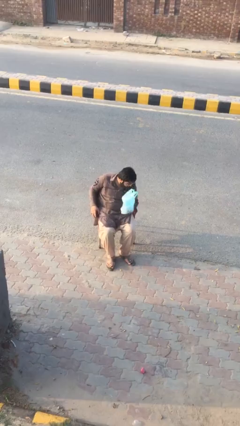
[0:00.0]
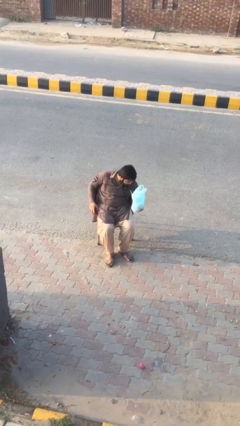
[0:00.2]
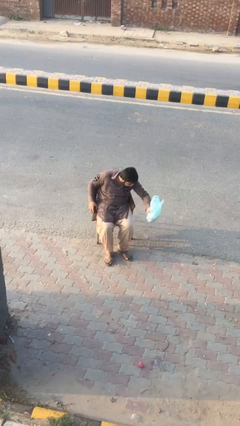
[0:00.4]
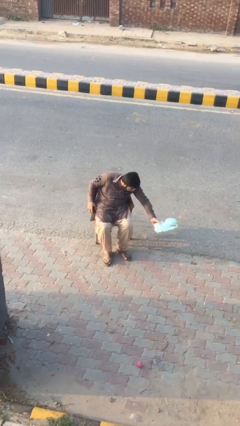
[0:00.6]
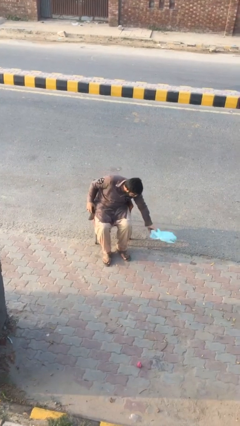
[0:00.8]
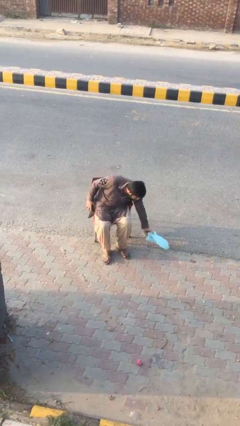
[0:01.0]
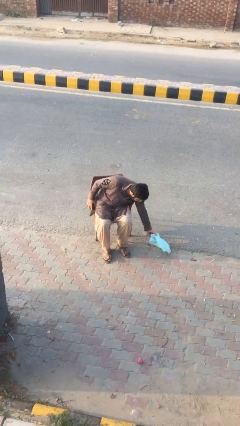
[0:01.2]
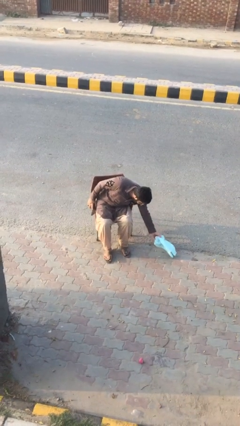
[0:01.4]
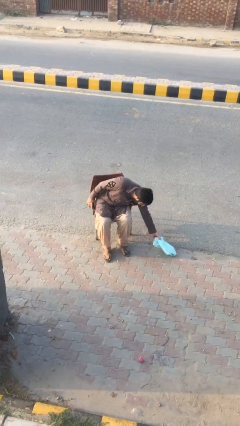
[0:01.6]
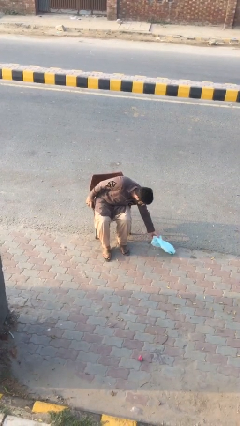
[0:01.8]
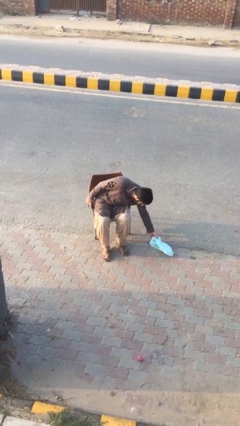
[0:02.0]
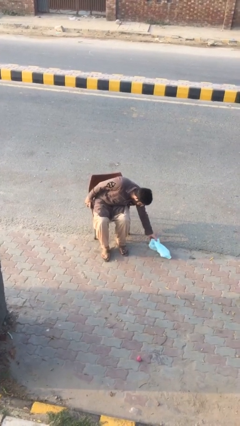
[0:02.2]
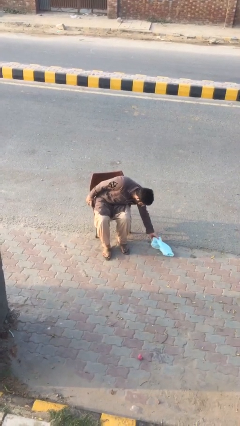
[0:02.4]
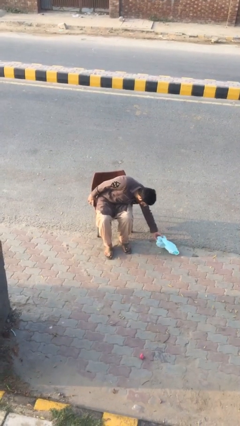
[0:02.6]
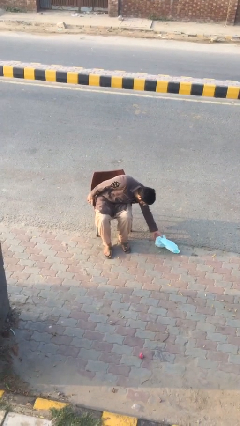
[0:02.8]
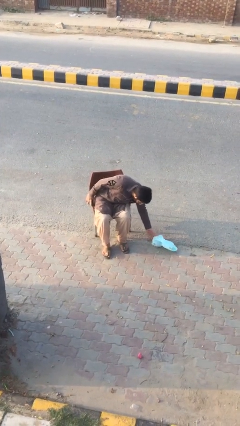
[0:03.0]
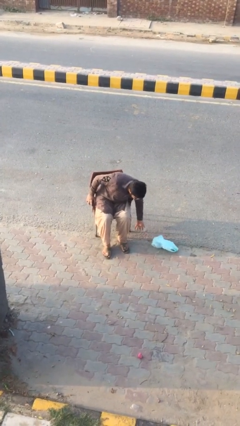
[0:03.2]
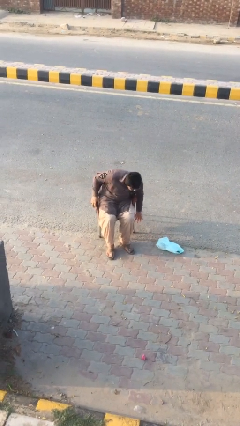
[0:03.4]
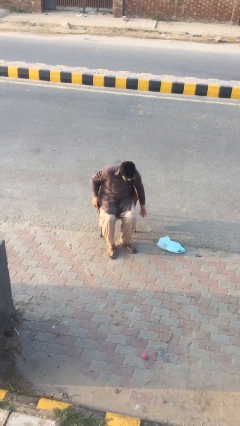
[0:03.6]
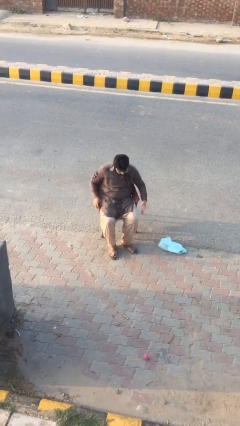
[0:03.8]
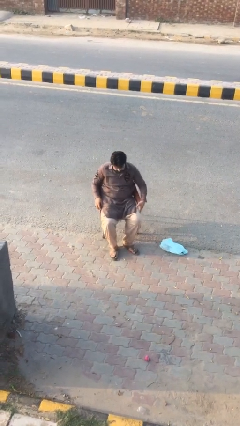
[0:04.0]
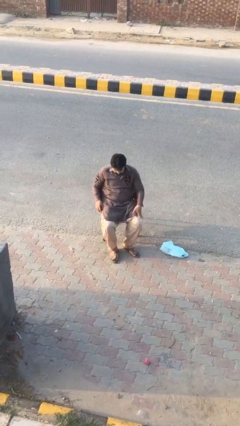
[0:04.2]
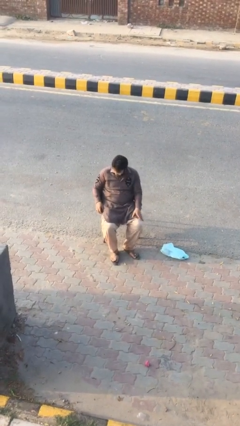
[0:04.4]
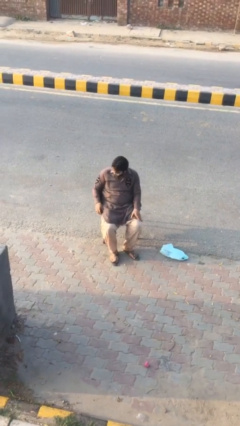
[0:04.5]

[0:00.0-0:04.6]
person puts down object on floor

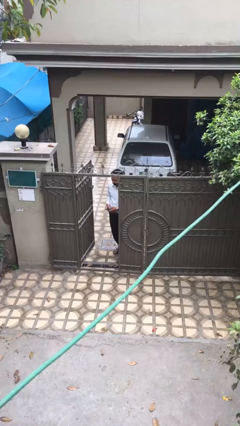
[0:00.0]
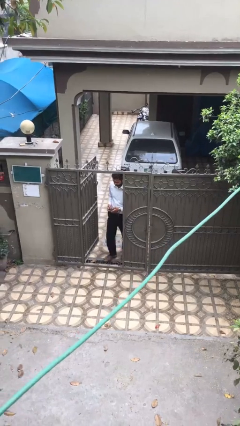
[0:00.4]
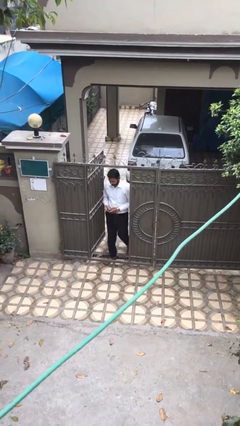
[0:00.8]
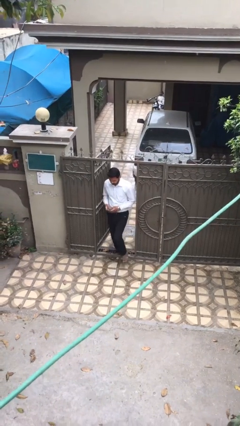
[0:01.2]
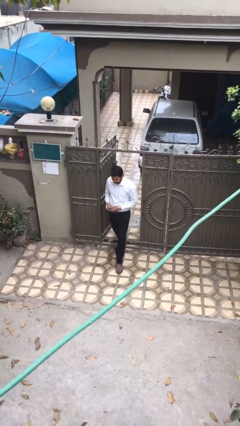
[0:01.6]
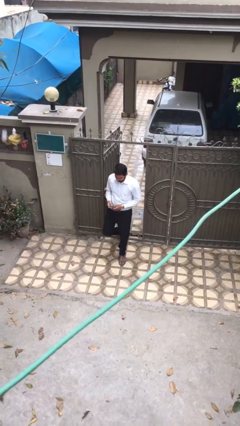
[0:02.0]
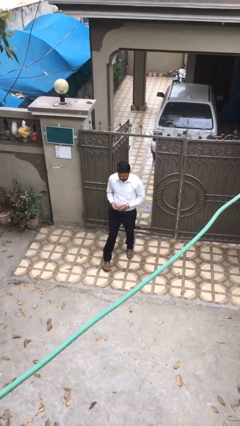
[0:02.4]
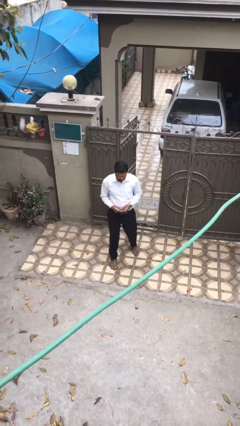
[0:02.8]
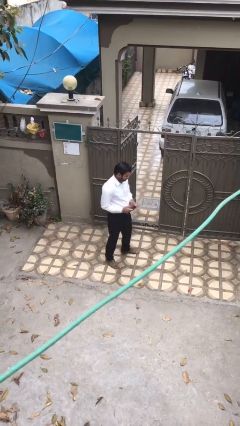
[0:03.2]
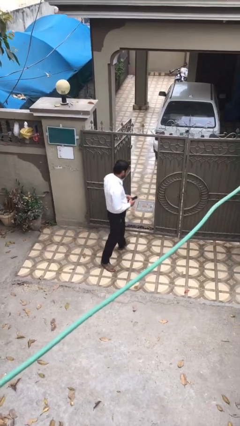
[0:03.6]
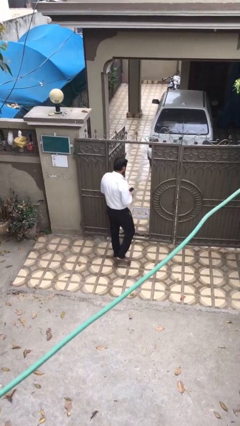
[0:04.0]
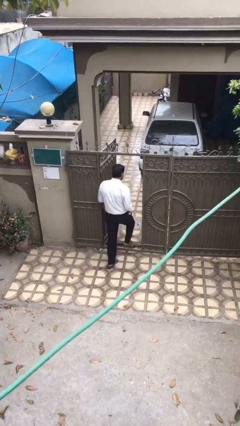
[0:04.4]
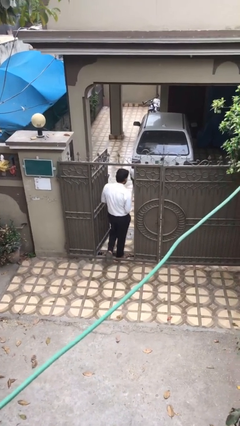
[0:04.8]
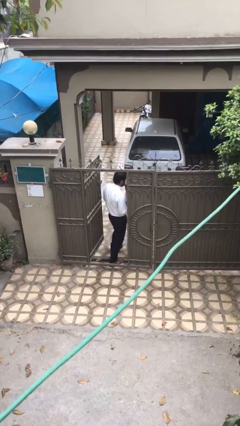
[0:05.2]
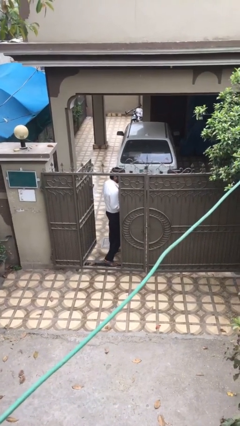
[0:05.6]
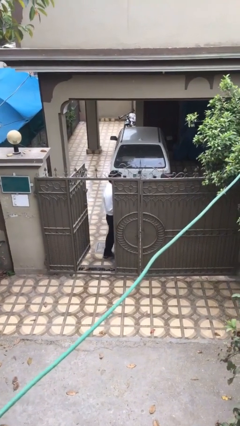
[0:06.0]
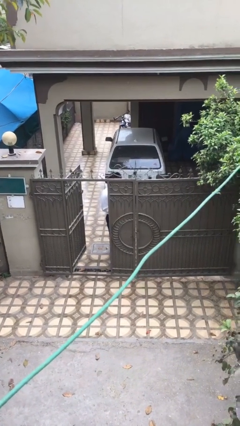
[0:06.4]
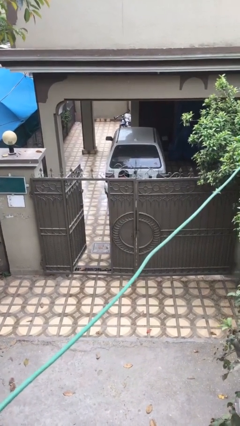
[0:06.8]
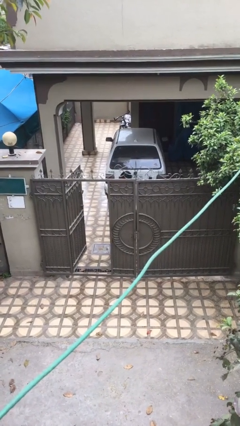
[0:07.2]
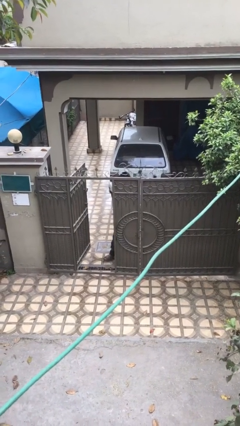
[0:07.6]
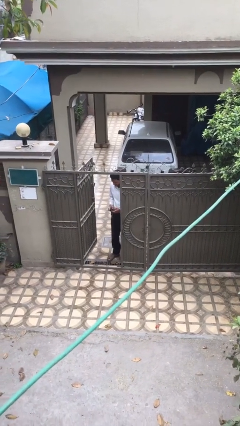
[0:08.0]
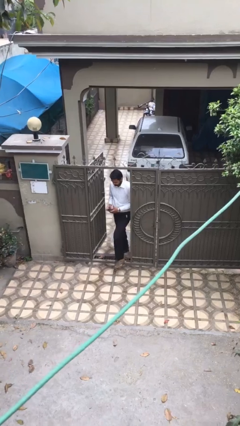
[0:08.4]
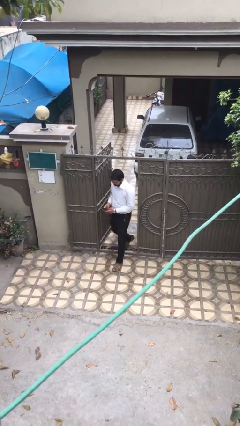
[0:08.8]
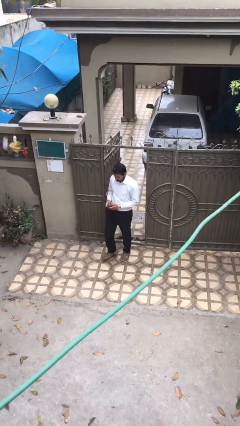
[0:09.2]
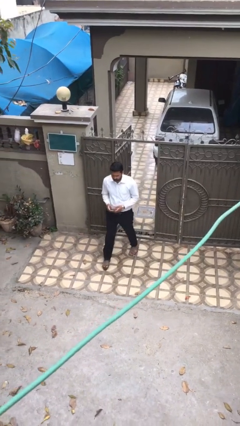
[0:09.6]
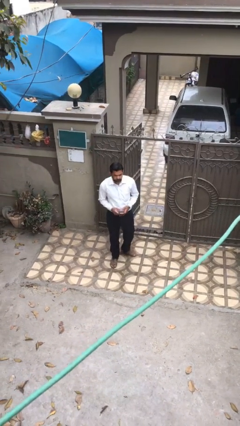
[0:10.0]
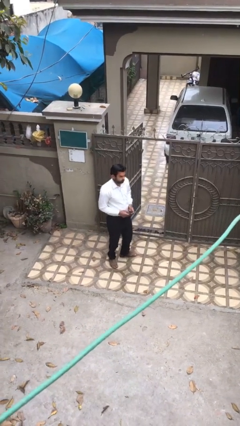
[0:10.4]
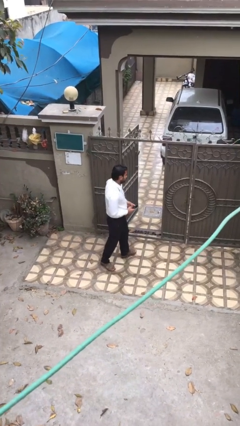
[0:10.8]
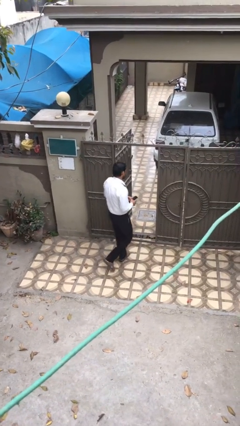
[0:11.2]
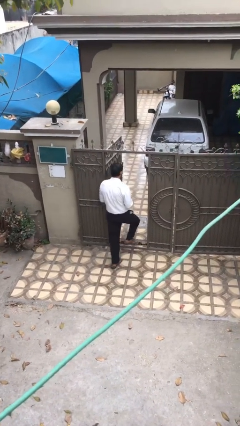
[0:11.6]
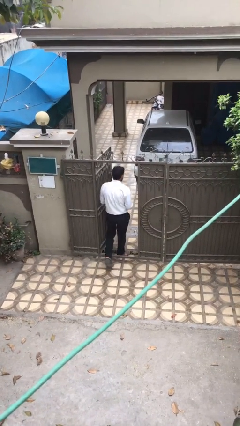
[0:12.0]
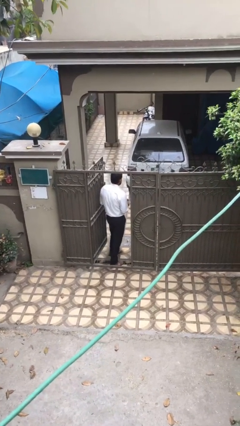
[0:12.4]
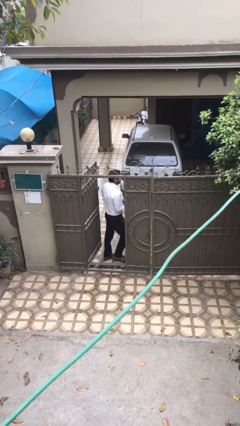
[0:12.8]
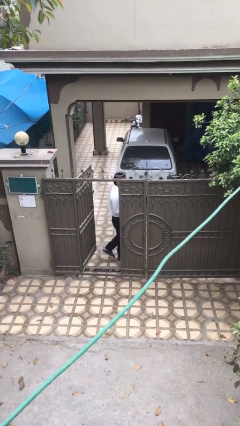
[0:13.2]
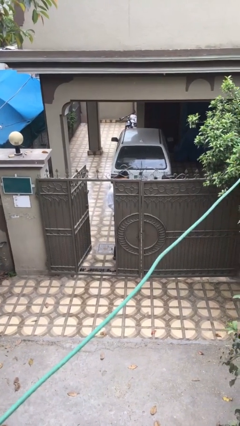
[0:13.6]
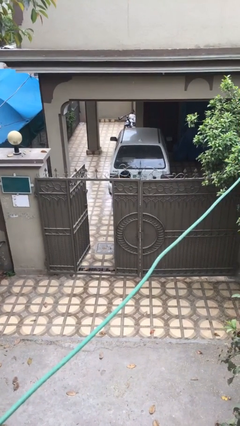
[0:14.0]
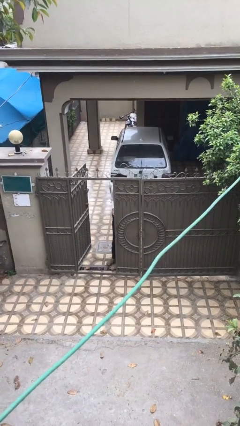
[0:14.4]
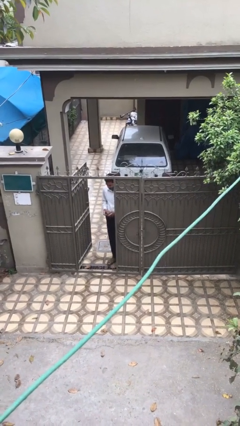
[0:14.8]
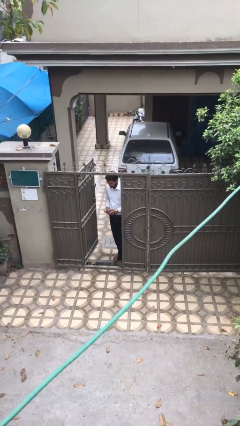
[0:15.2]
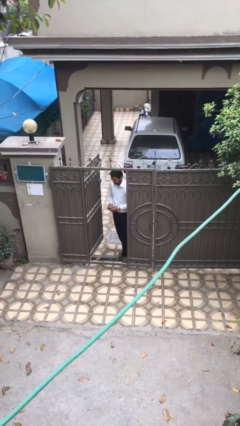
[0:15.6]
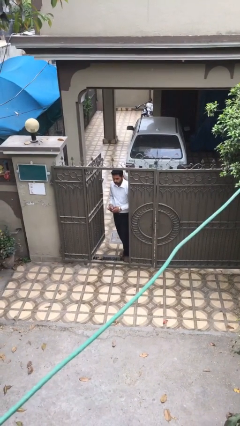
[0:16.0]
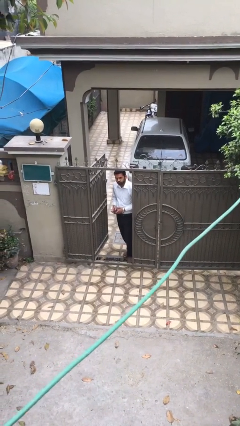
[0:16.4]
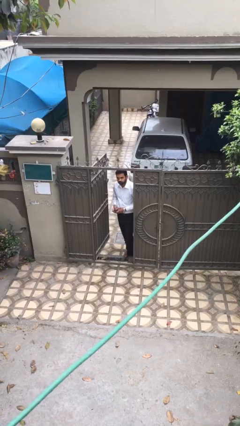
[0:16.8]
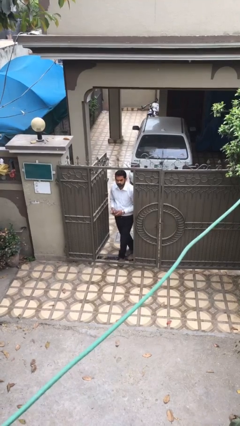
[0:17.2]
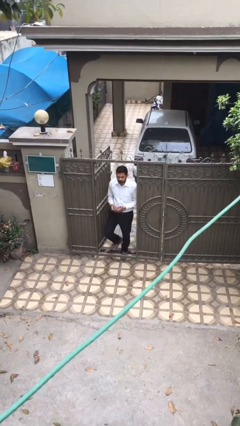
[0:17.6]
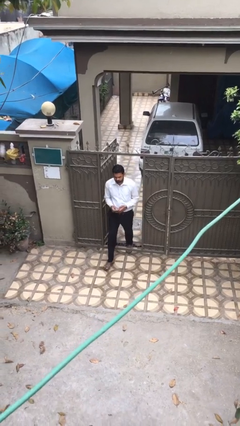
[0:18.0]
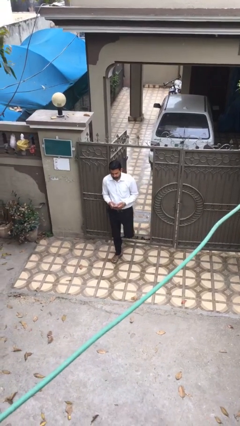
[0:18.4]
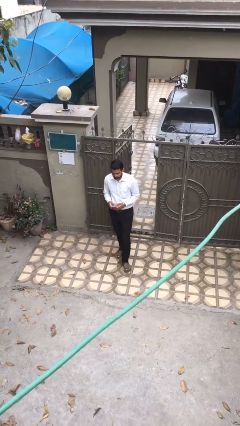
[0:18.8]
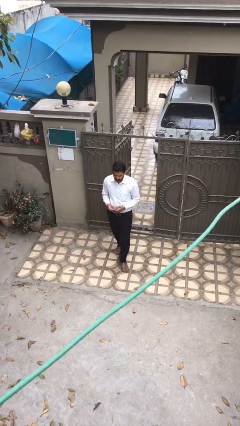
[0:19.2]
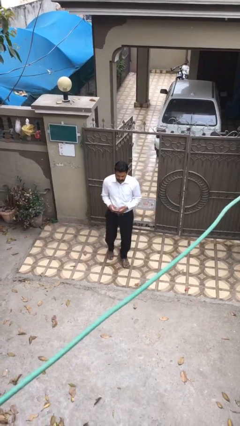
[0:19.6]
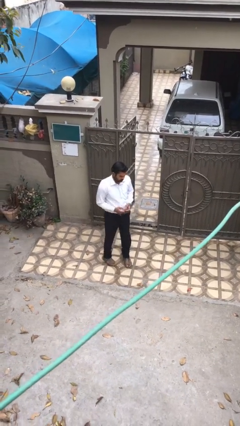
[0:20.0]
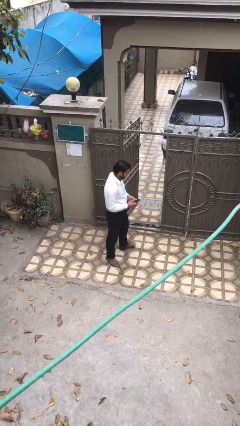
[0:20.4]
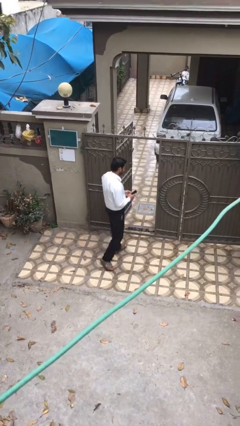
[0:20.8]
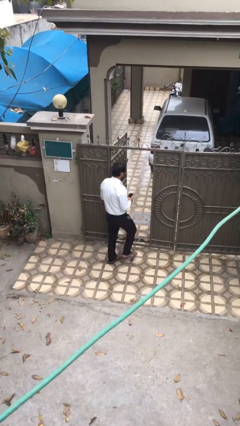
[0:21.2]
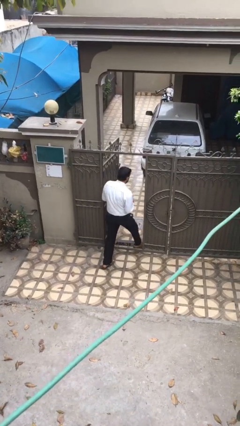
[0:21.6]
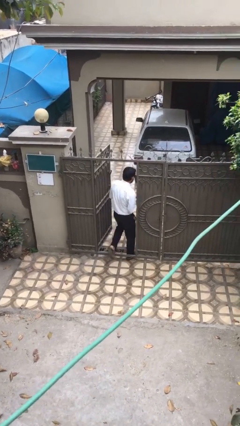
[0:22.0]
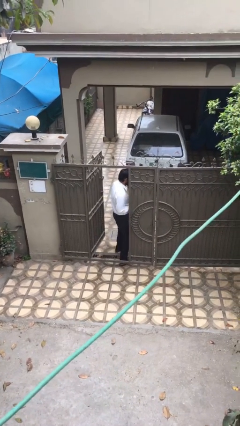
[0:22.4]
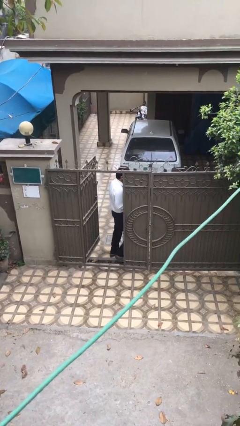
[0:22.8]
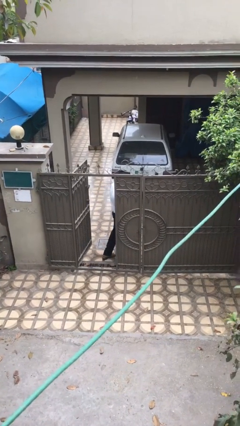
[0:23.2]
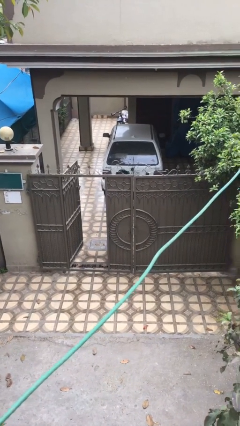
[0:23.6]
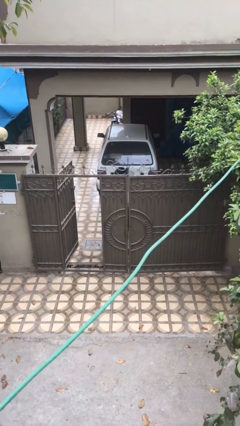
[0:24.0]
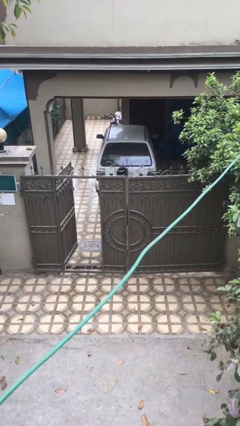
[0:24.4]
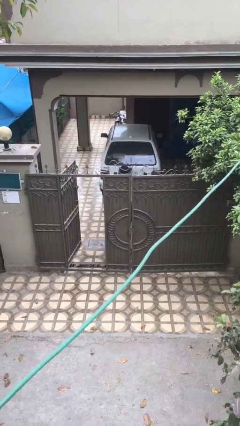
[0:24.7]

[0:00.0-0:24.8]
person texts on phone

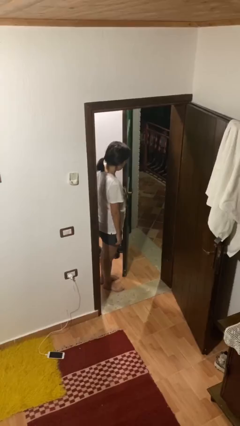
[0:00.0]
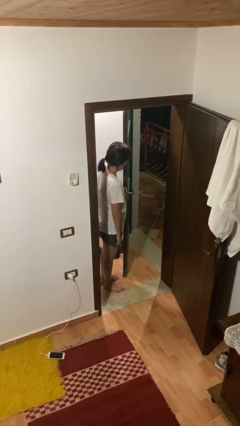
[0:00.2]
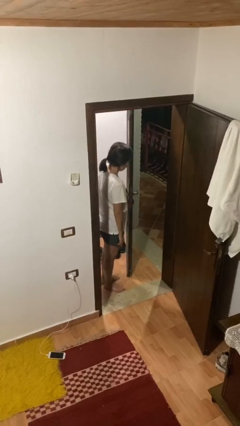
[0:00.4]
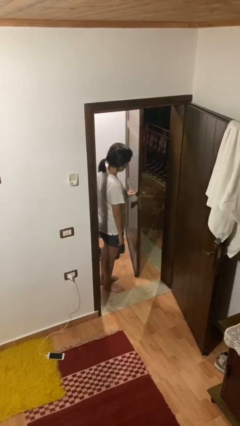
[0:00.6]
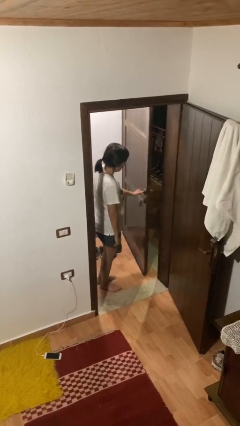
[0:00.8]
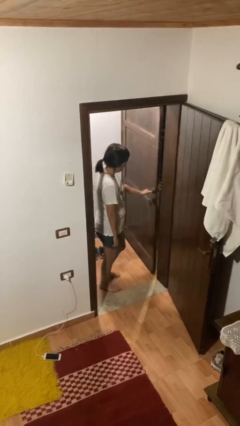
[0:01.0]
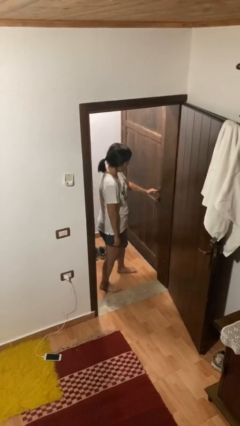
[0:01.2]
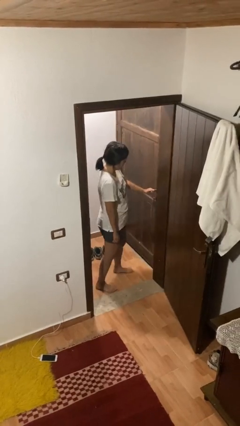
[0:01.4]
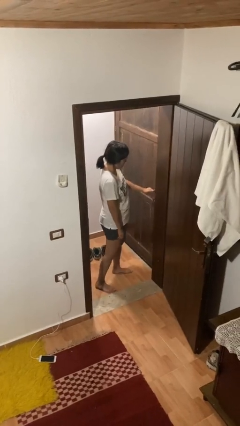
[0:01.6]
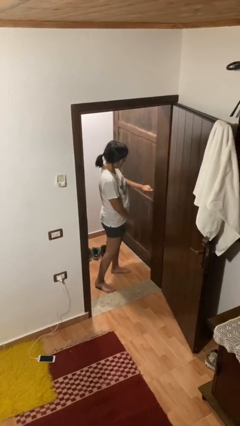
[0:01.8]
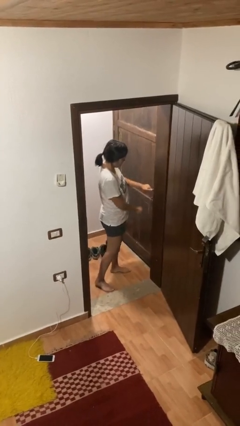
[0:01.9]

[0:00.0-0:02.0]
person closes facility door
